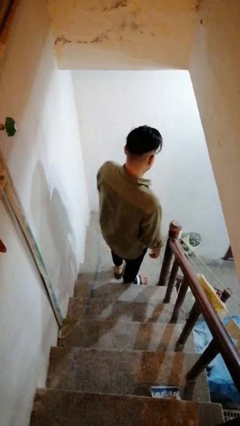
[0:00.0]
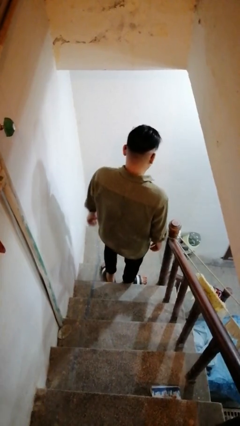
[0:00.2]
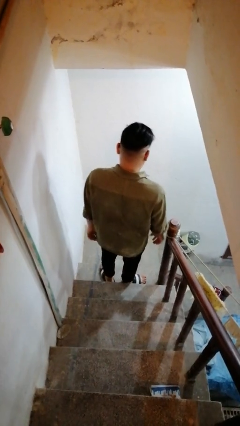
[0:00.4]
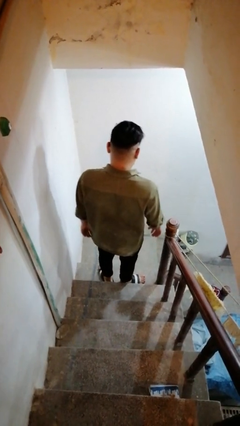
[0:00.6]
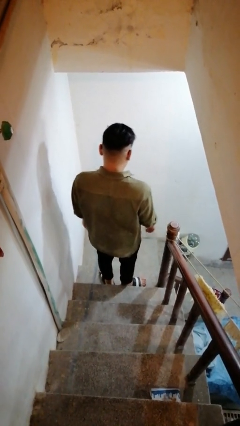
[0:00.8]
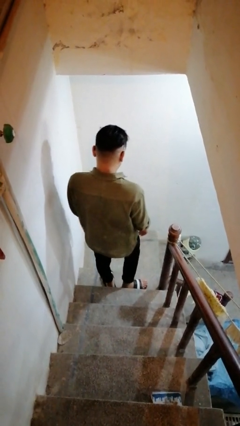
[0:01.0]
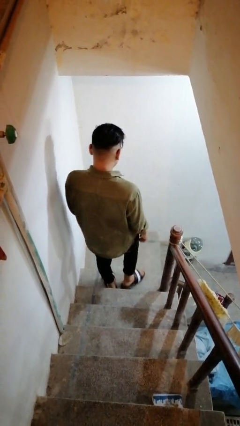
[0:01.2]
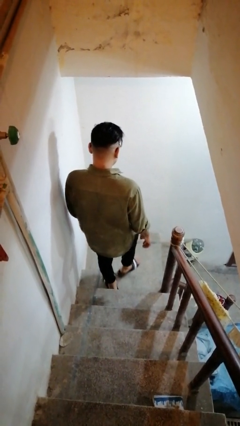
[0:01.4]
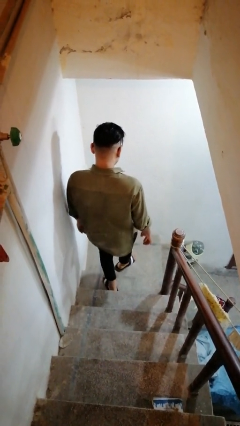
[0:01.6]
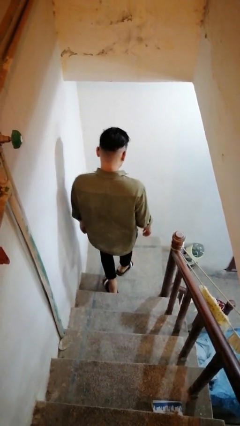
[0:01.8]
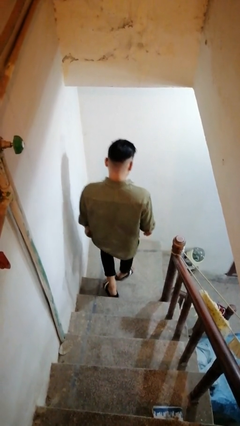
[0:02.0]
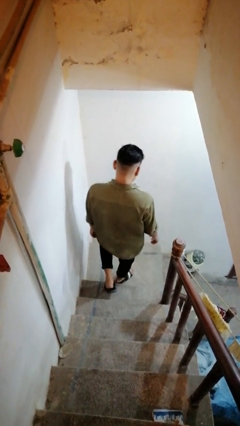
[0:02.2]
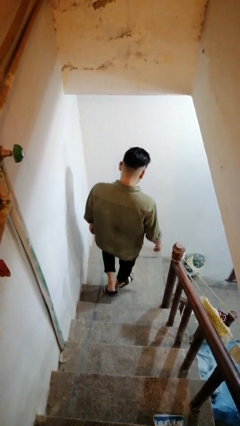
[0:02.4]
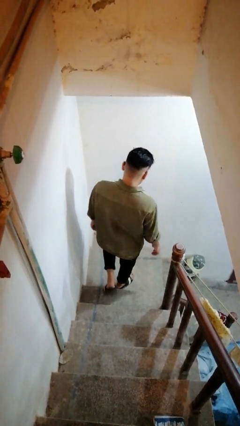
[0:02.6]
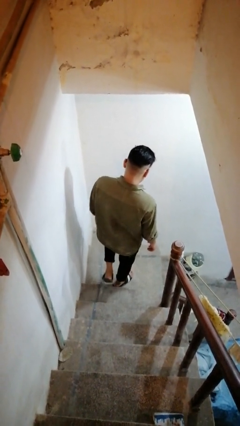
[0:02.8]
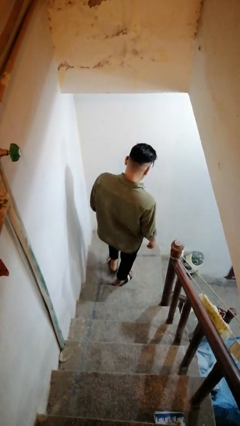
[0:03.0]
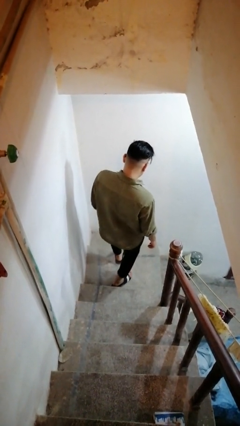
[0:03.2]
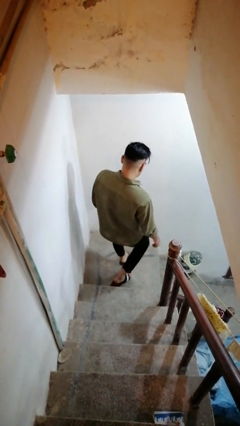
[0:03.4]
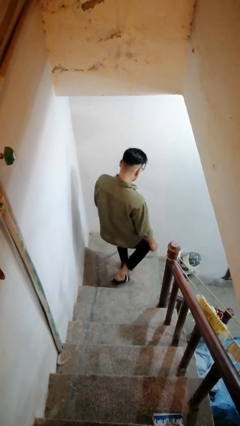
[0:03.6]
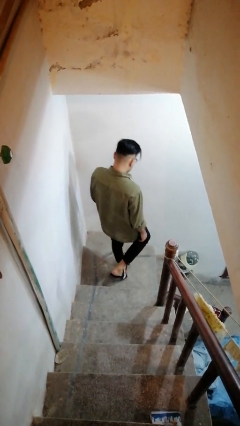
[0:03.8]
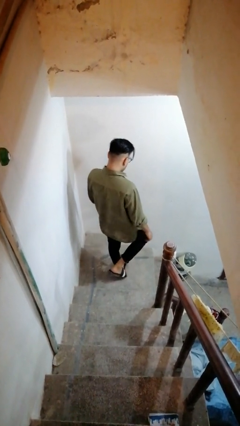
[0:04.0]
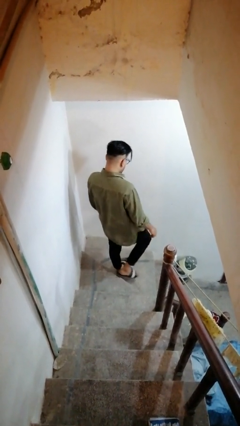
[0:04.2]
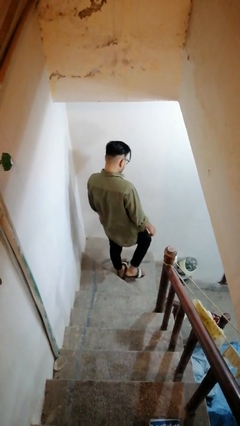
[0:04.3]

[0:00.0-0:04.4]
person climbs down stairs

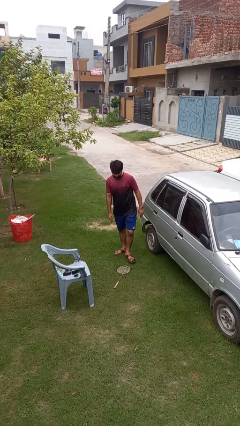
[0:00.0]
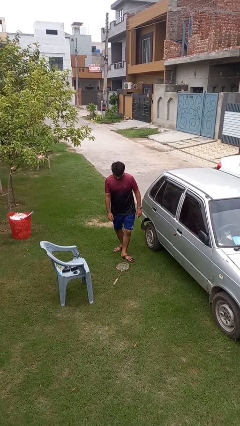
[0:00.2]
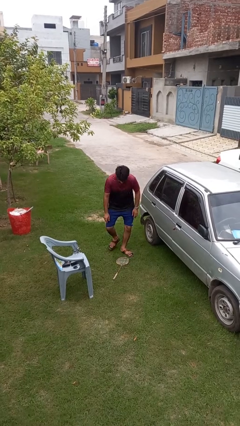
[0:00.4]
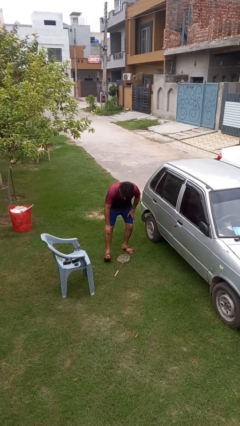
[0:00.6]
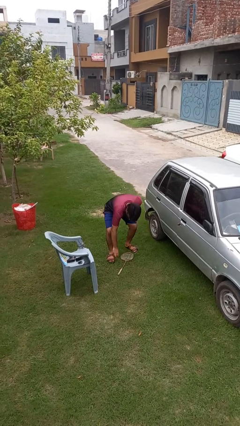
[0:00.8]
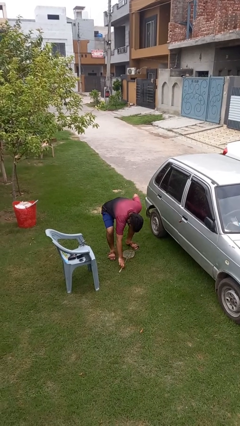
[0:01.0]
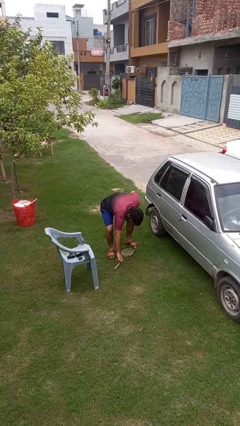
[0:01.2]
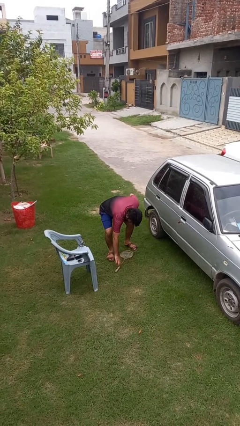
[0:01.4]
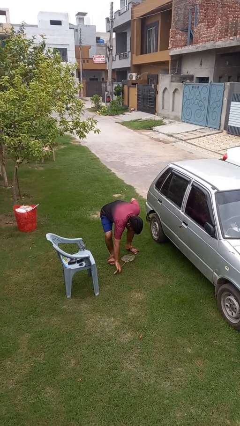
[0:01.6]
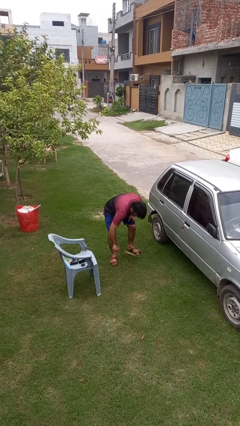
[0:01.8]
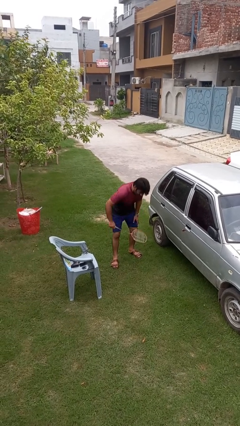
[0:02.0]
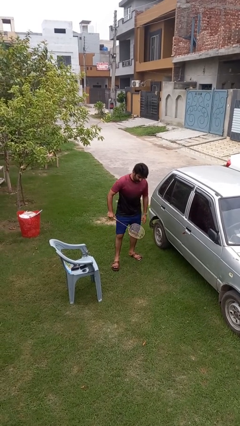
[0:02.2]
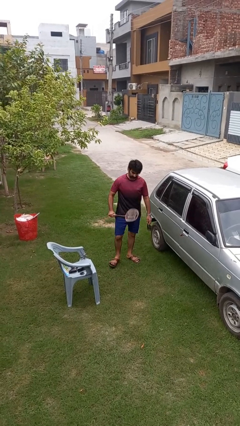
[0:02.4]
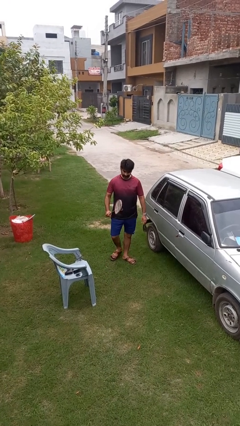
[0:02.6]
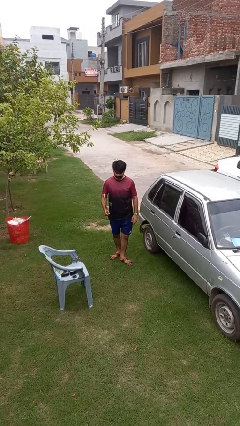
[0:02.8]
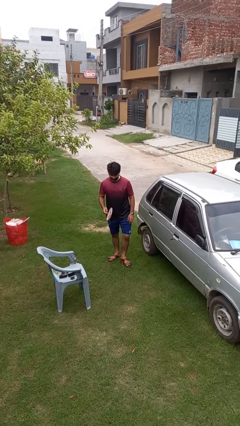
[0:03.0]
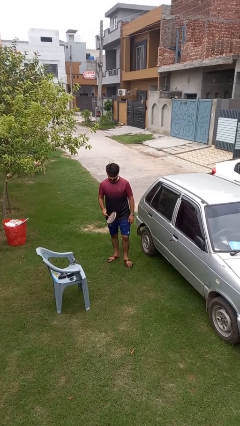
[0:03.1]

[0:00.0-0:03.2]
person picks up object from floor

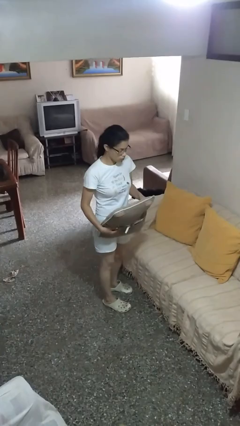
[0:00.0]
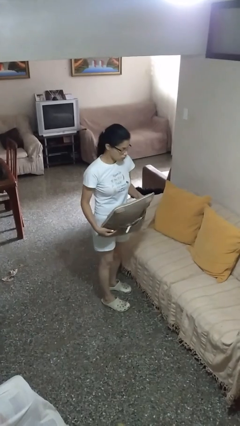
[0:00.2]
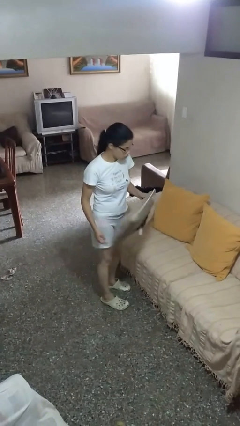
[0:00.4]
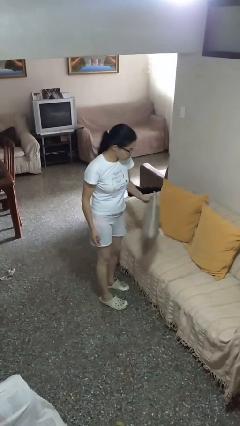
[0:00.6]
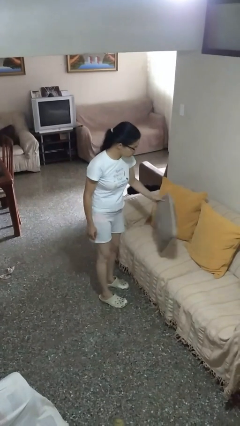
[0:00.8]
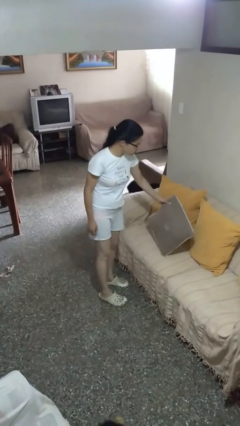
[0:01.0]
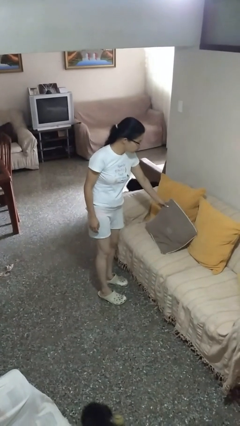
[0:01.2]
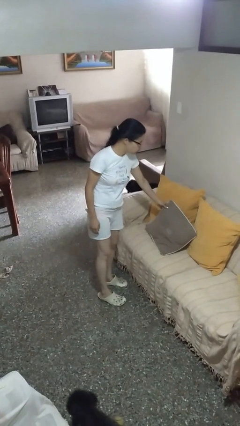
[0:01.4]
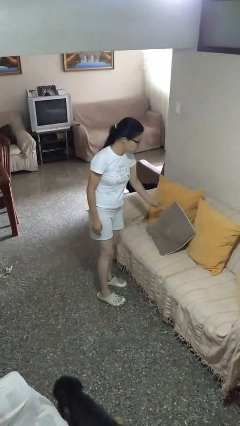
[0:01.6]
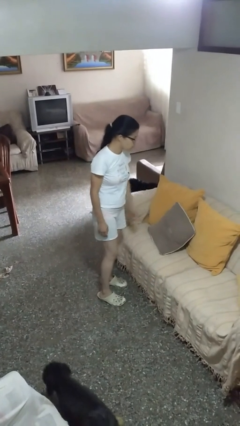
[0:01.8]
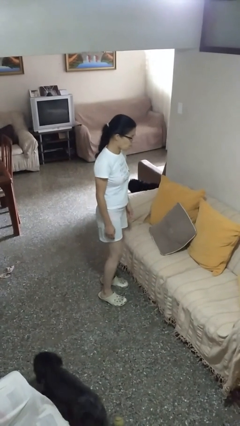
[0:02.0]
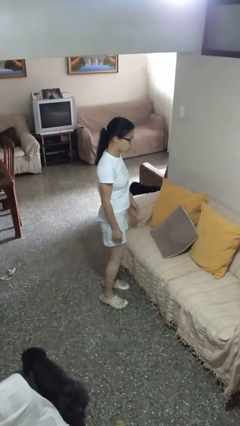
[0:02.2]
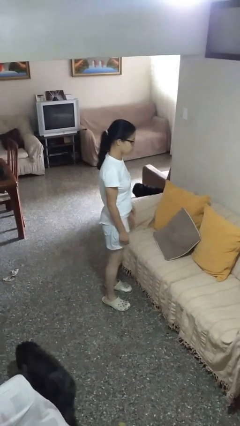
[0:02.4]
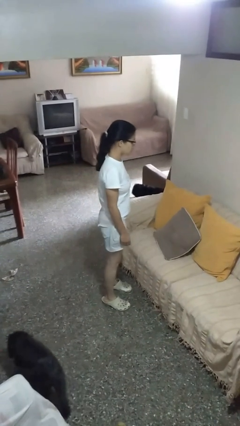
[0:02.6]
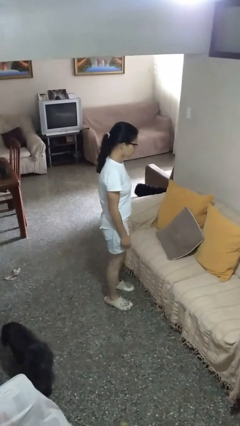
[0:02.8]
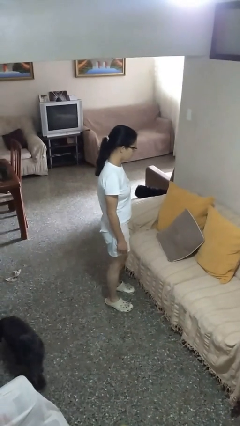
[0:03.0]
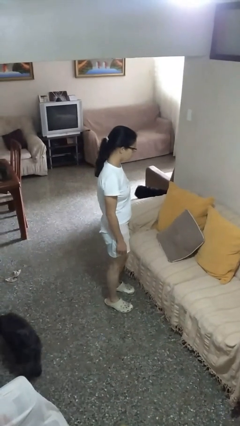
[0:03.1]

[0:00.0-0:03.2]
person puts down object on couch

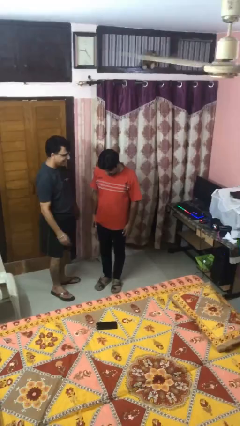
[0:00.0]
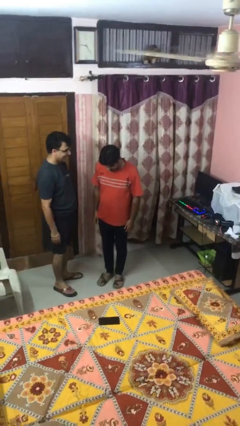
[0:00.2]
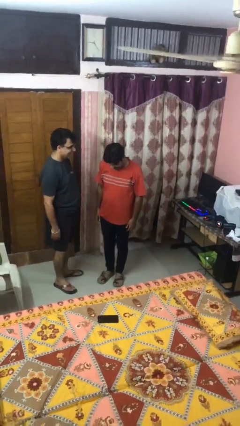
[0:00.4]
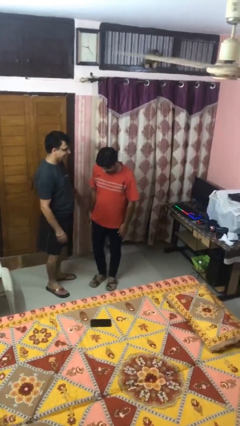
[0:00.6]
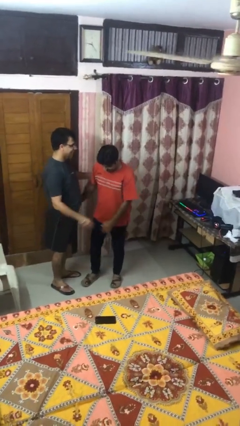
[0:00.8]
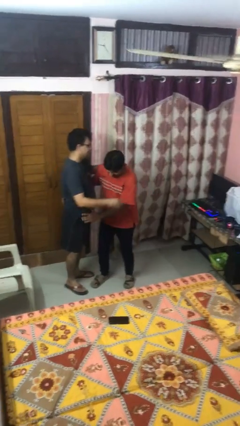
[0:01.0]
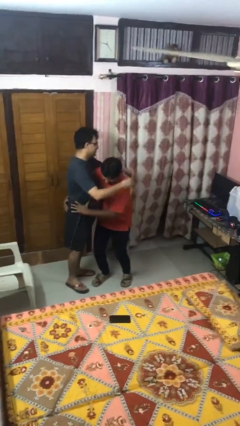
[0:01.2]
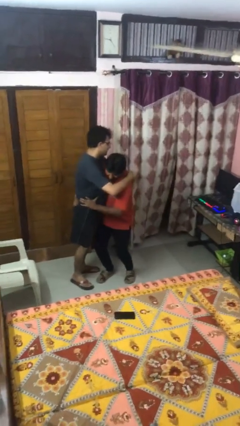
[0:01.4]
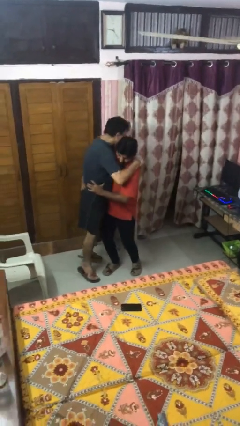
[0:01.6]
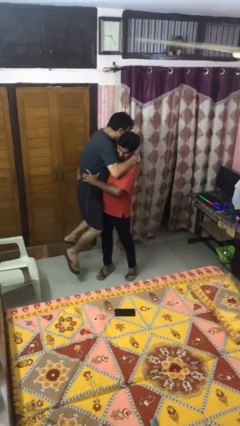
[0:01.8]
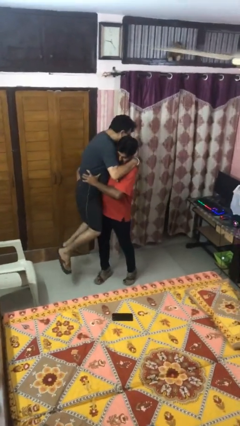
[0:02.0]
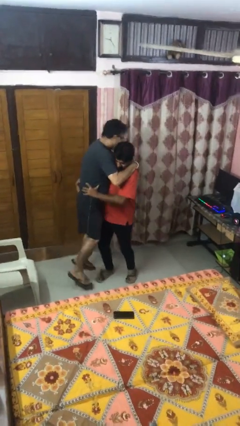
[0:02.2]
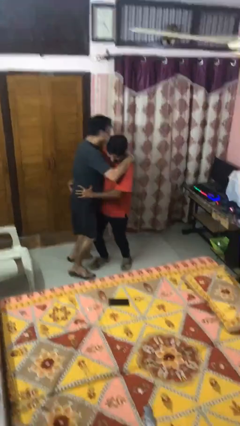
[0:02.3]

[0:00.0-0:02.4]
person picks up person

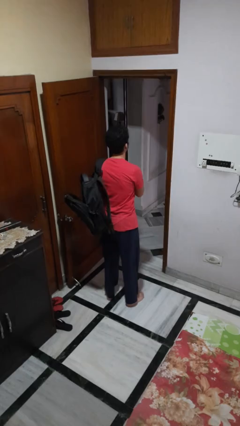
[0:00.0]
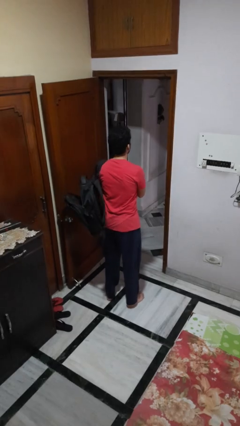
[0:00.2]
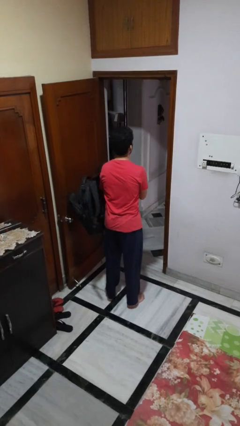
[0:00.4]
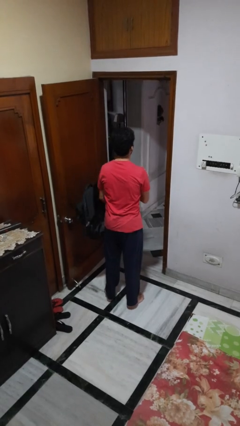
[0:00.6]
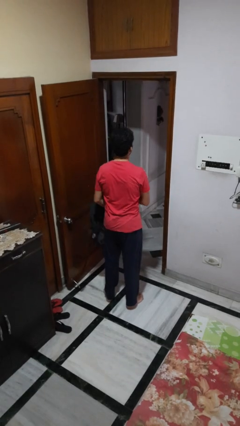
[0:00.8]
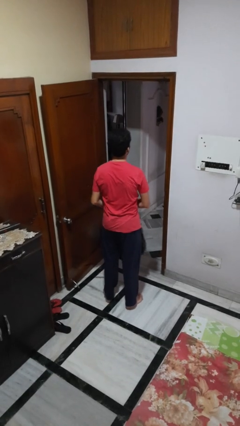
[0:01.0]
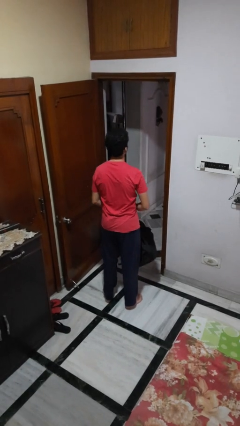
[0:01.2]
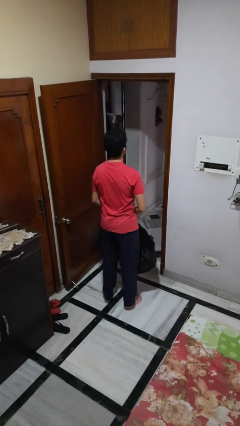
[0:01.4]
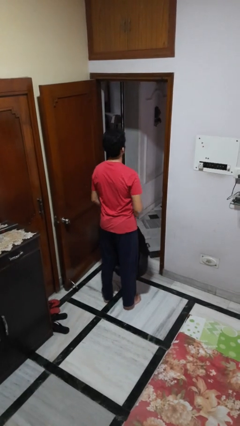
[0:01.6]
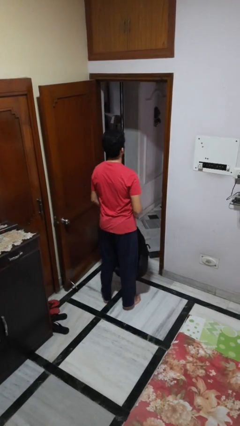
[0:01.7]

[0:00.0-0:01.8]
person takes off backpack

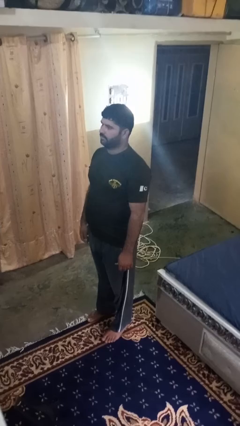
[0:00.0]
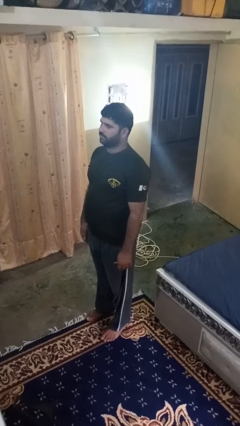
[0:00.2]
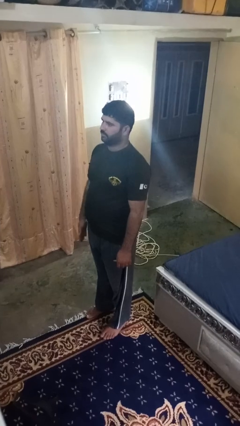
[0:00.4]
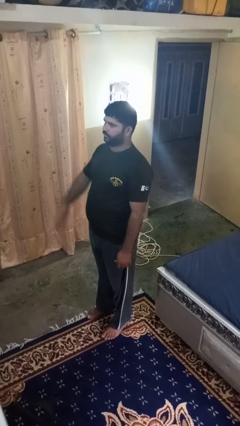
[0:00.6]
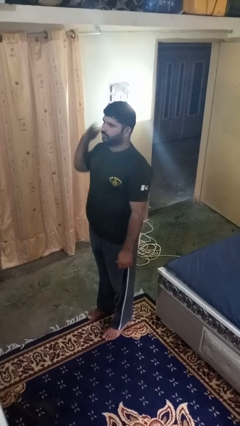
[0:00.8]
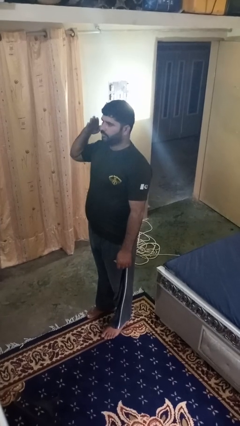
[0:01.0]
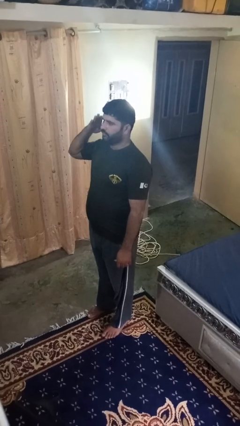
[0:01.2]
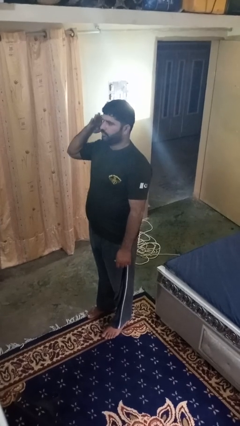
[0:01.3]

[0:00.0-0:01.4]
person salutes

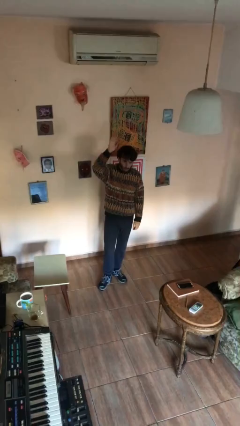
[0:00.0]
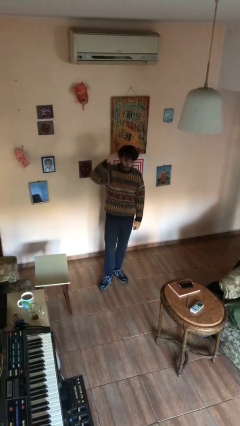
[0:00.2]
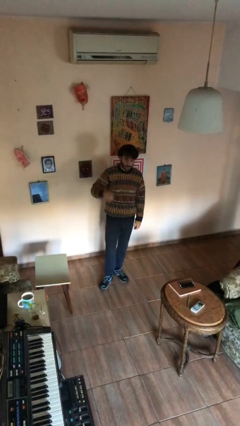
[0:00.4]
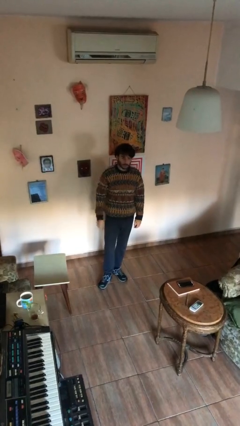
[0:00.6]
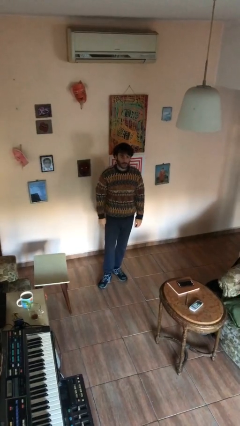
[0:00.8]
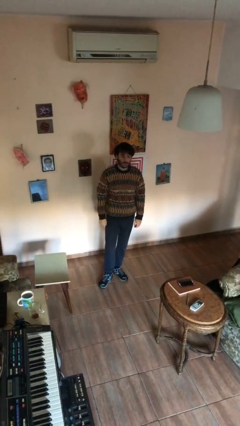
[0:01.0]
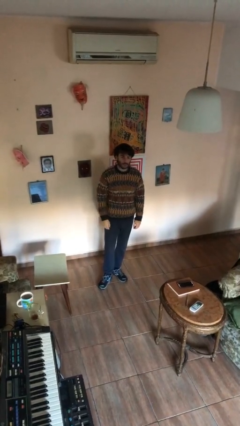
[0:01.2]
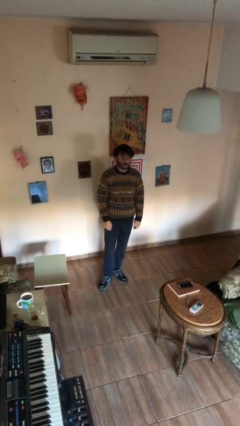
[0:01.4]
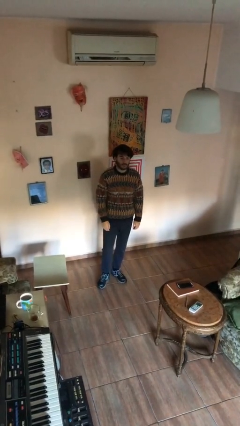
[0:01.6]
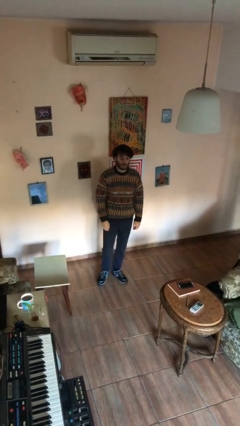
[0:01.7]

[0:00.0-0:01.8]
person gestures lower hand
